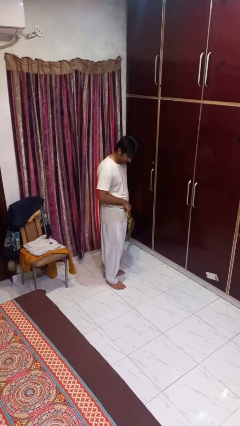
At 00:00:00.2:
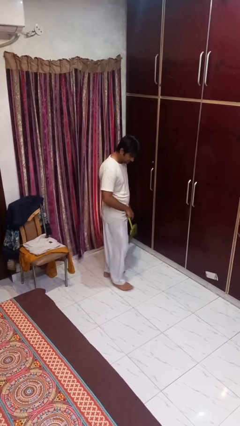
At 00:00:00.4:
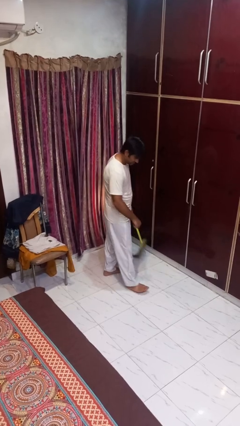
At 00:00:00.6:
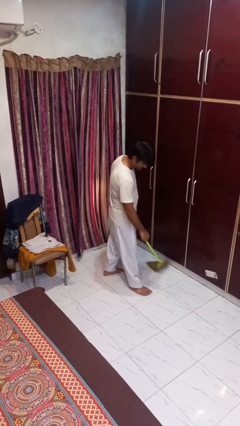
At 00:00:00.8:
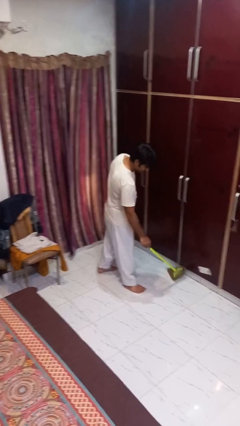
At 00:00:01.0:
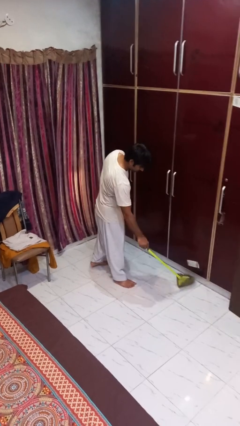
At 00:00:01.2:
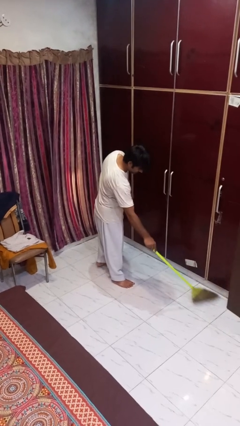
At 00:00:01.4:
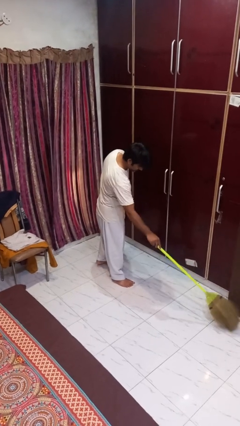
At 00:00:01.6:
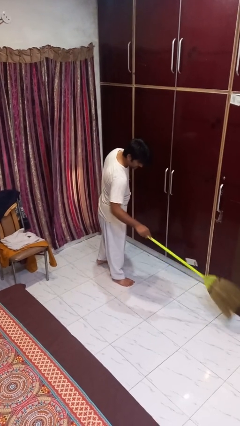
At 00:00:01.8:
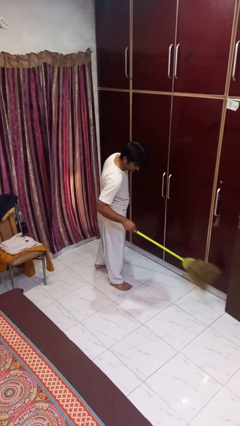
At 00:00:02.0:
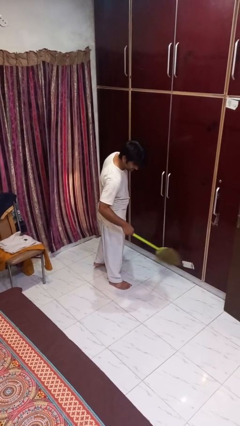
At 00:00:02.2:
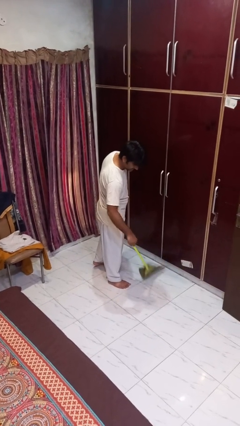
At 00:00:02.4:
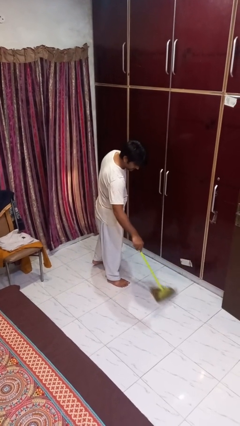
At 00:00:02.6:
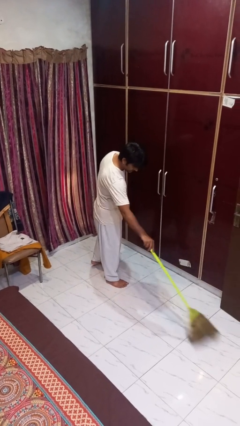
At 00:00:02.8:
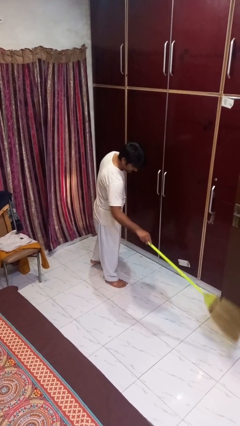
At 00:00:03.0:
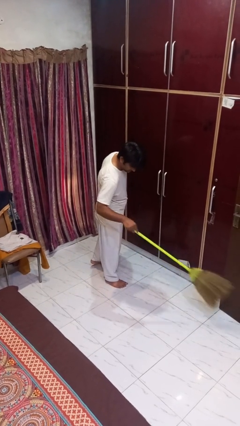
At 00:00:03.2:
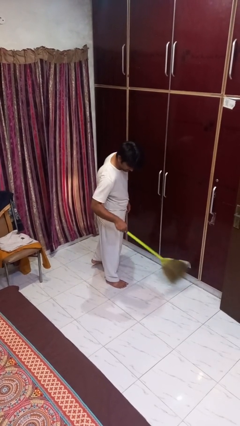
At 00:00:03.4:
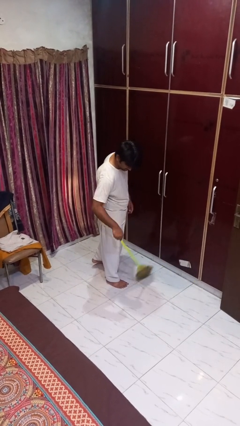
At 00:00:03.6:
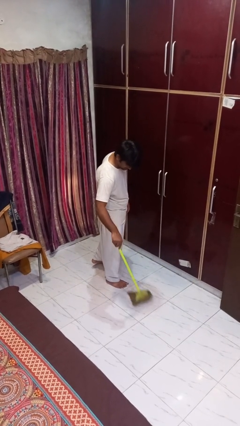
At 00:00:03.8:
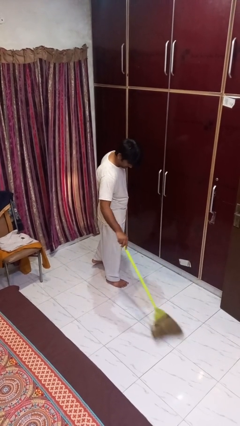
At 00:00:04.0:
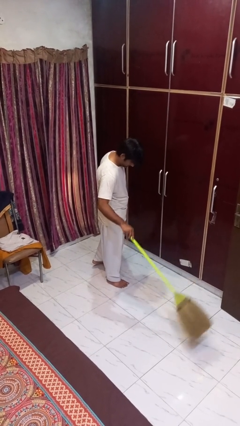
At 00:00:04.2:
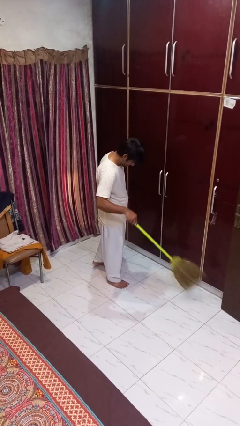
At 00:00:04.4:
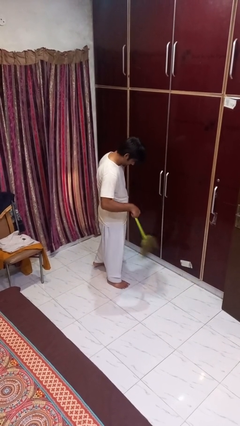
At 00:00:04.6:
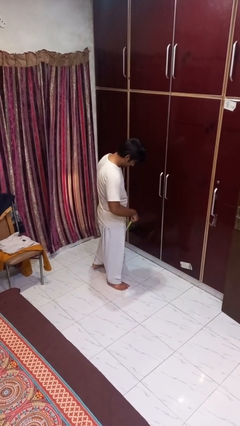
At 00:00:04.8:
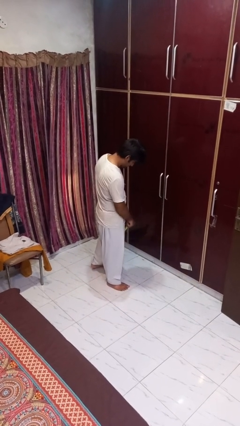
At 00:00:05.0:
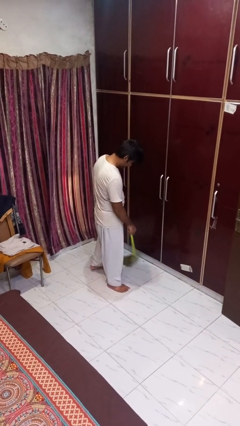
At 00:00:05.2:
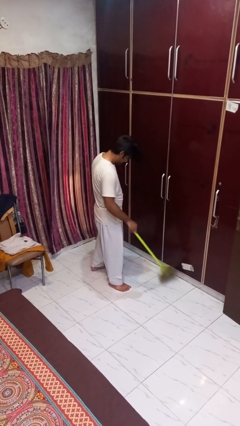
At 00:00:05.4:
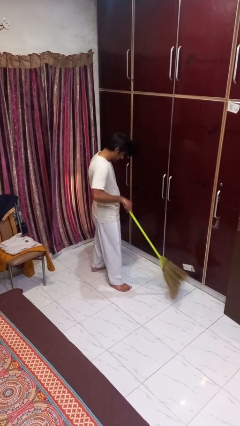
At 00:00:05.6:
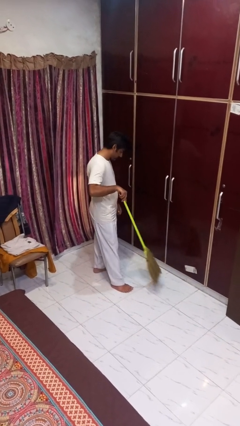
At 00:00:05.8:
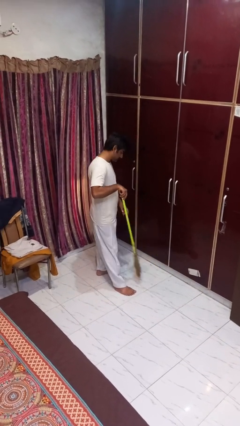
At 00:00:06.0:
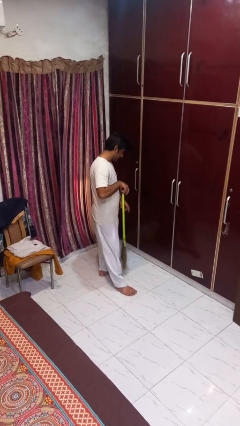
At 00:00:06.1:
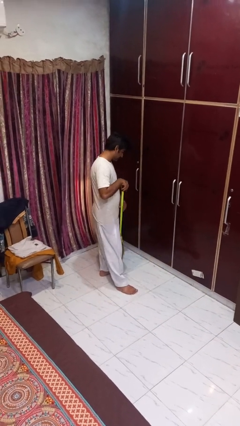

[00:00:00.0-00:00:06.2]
person sweeps floor

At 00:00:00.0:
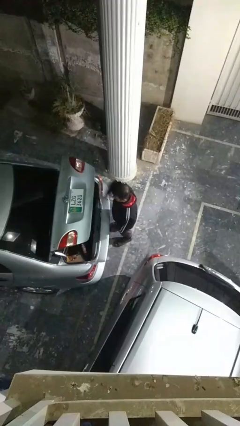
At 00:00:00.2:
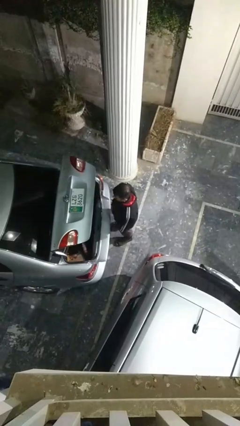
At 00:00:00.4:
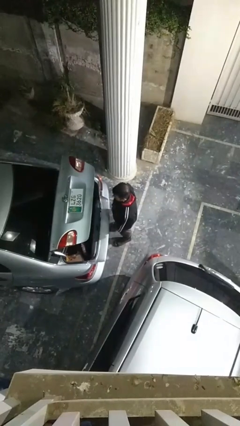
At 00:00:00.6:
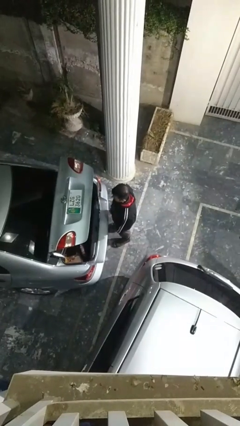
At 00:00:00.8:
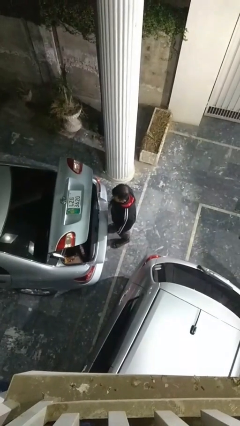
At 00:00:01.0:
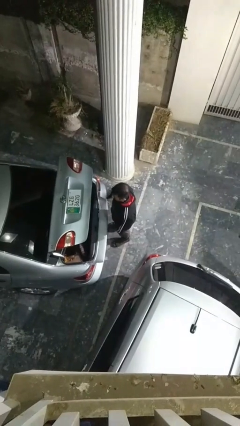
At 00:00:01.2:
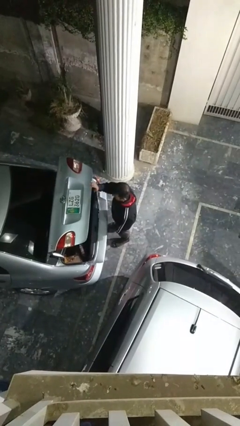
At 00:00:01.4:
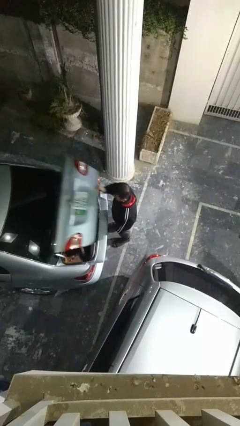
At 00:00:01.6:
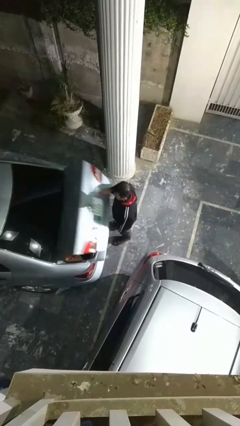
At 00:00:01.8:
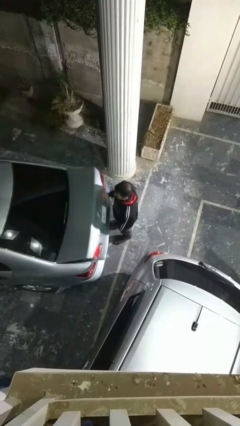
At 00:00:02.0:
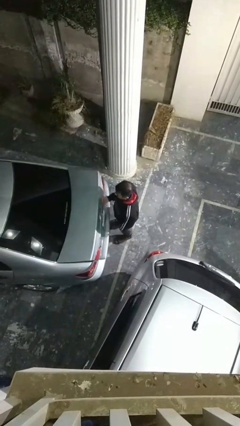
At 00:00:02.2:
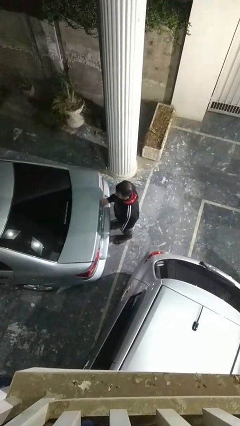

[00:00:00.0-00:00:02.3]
person closes car trunk

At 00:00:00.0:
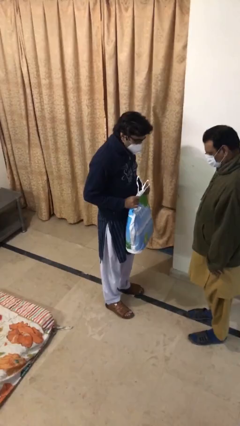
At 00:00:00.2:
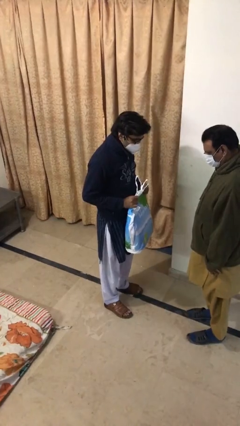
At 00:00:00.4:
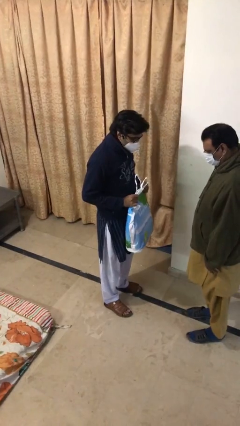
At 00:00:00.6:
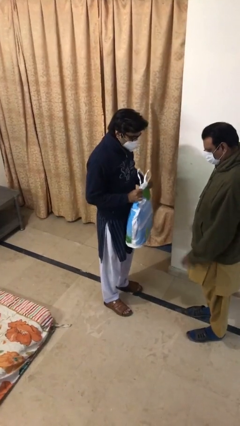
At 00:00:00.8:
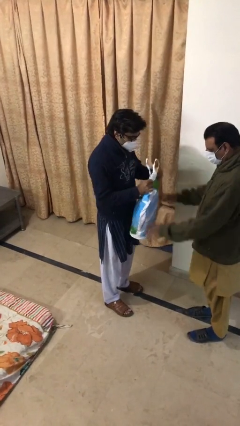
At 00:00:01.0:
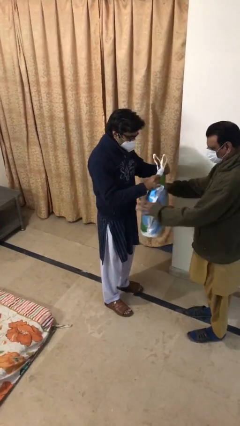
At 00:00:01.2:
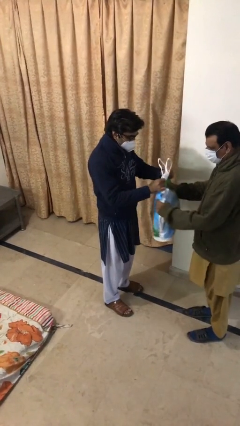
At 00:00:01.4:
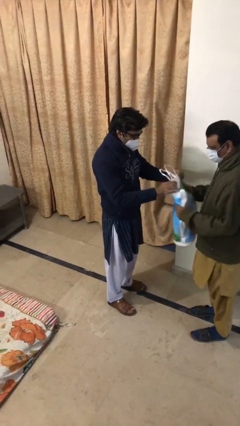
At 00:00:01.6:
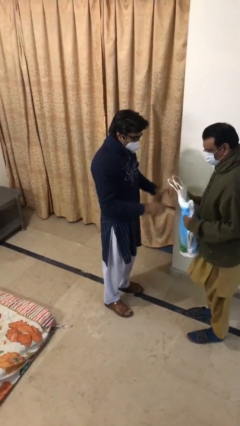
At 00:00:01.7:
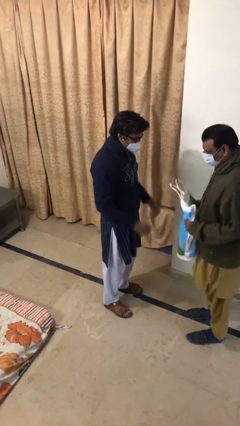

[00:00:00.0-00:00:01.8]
person transfers object to person

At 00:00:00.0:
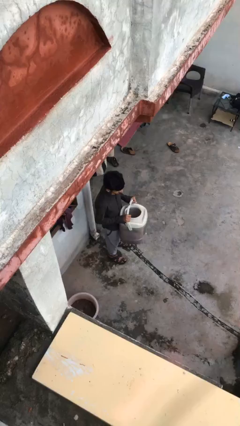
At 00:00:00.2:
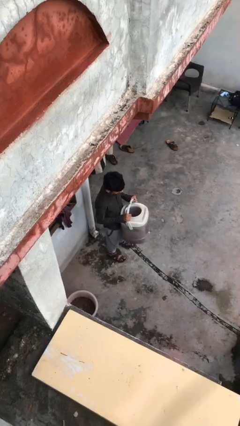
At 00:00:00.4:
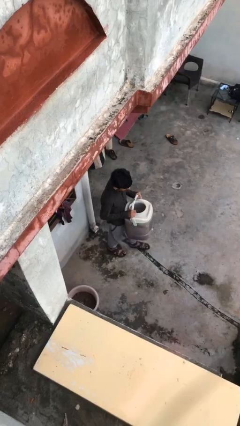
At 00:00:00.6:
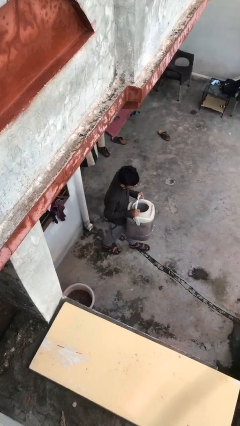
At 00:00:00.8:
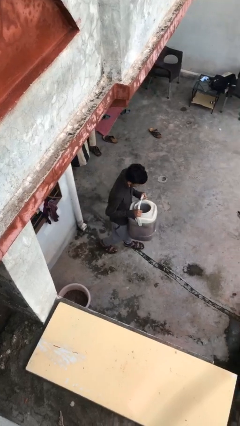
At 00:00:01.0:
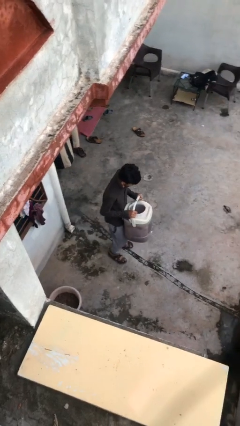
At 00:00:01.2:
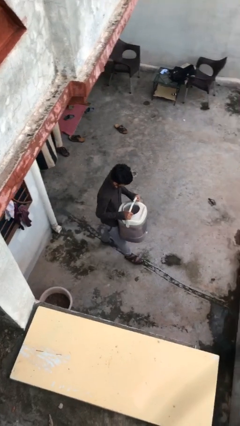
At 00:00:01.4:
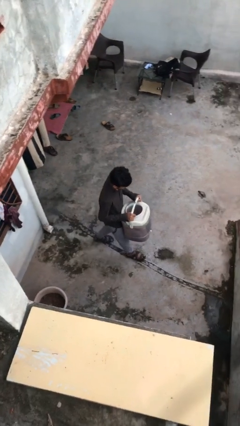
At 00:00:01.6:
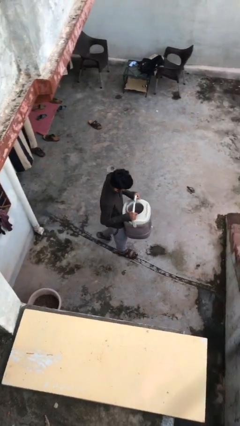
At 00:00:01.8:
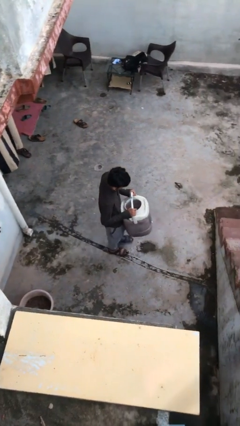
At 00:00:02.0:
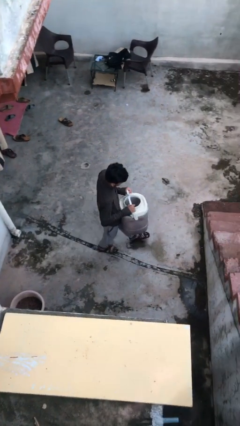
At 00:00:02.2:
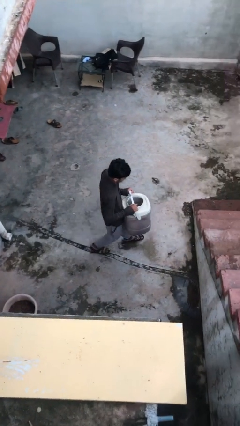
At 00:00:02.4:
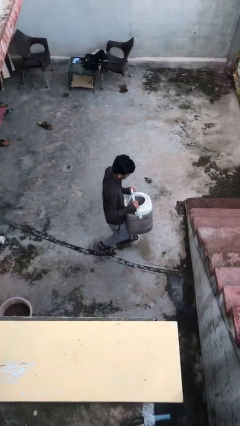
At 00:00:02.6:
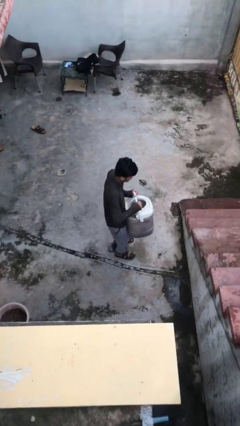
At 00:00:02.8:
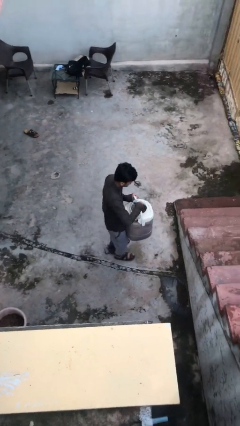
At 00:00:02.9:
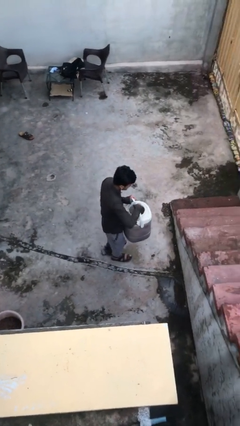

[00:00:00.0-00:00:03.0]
person carries heavy object

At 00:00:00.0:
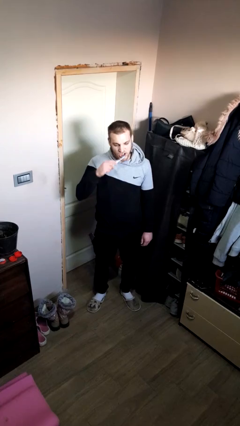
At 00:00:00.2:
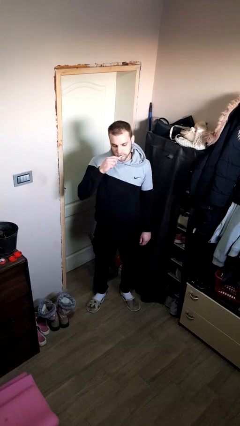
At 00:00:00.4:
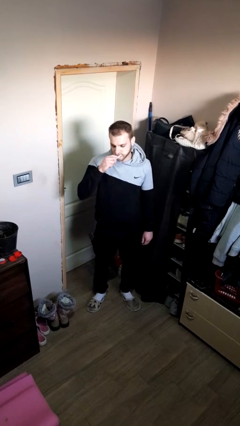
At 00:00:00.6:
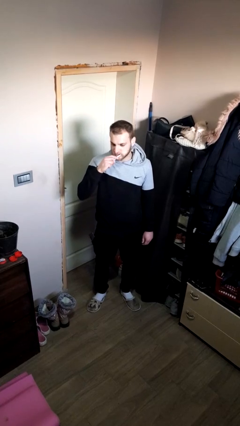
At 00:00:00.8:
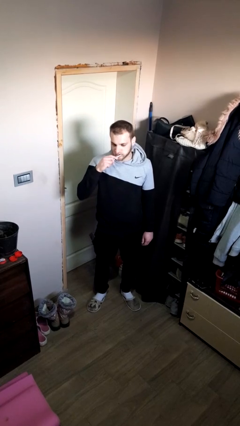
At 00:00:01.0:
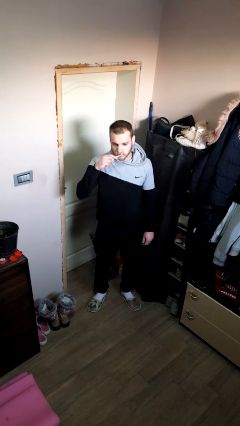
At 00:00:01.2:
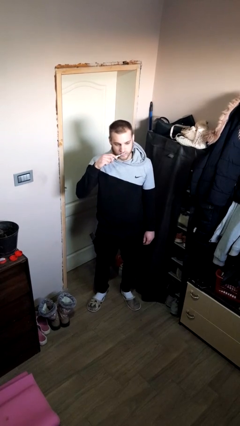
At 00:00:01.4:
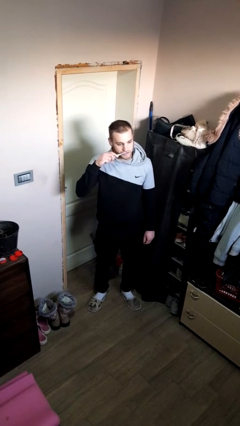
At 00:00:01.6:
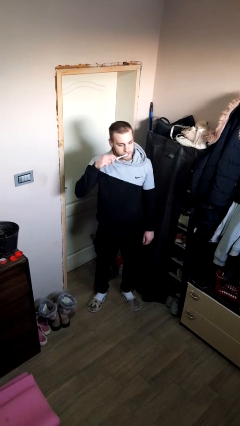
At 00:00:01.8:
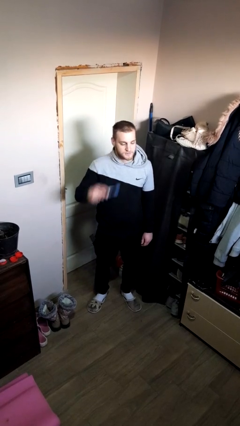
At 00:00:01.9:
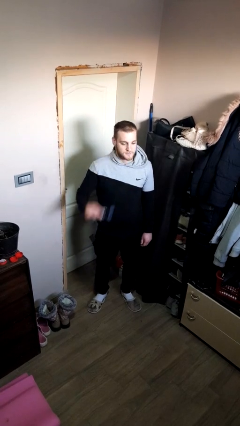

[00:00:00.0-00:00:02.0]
person brushes teeth

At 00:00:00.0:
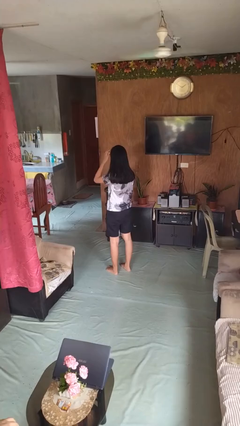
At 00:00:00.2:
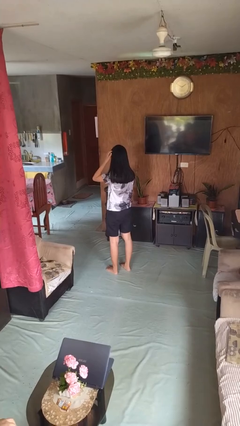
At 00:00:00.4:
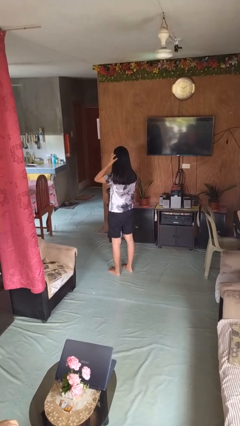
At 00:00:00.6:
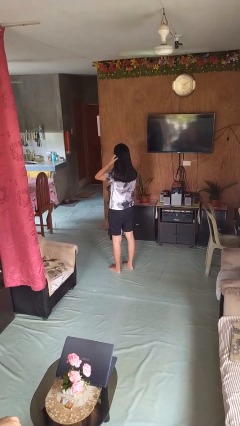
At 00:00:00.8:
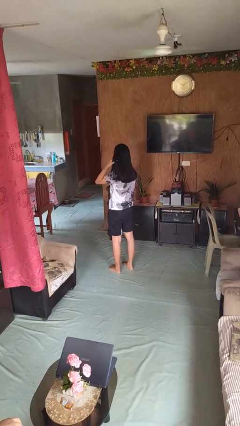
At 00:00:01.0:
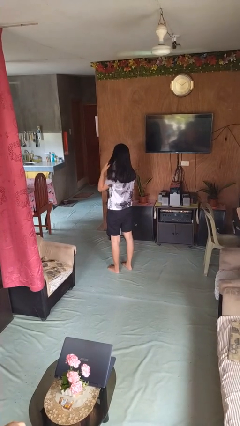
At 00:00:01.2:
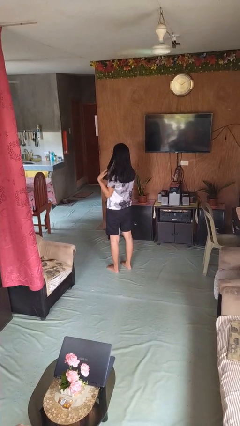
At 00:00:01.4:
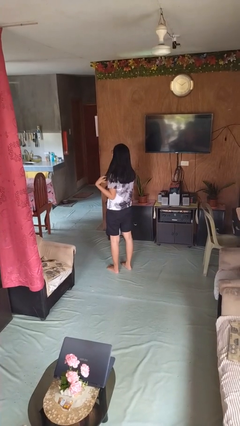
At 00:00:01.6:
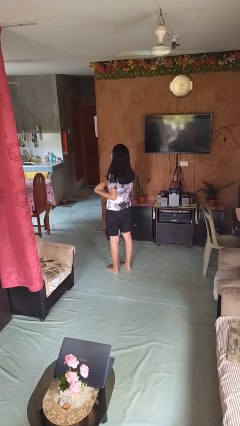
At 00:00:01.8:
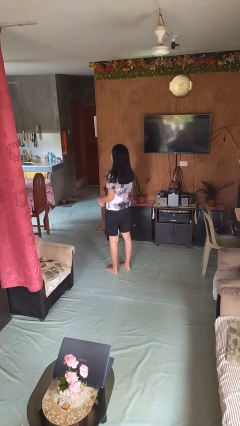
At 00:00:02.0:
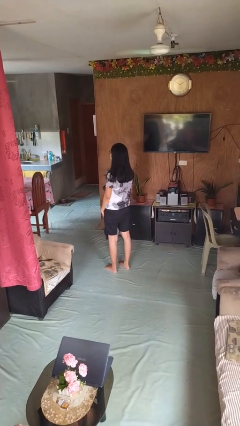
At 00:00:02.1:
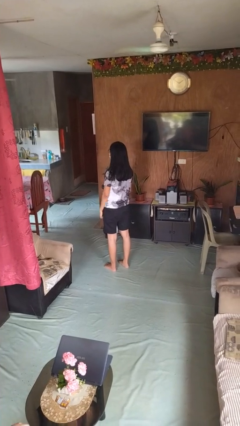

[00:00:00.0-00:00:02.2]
person strokes hair
